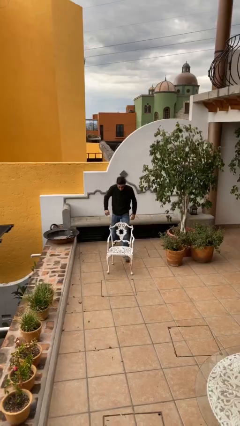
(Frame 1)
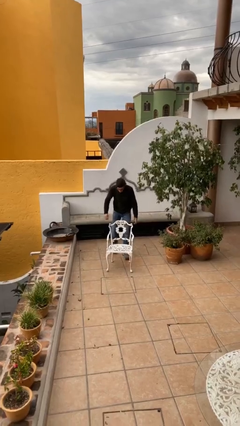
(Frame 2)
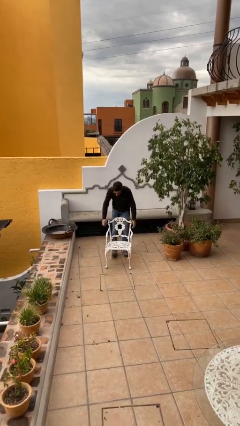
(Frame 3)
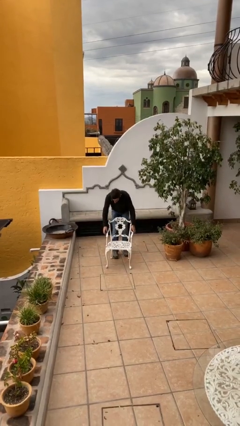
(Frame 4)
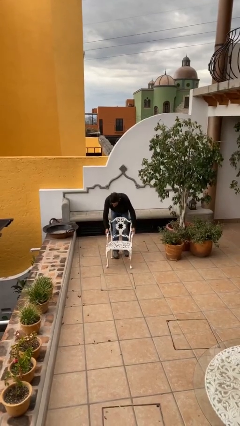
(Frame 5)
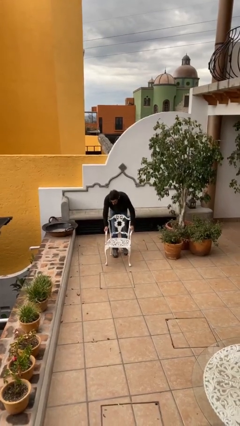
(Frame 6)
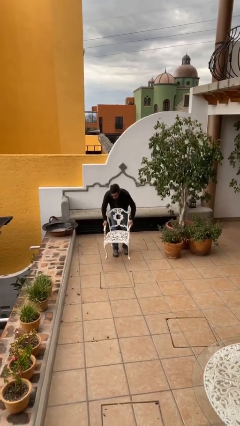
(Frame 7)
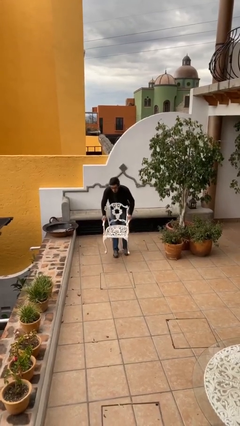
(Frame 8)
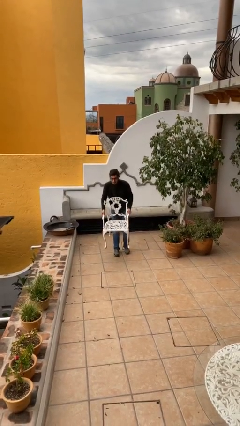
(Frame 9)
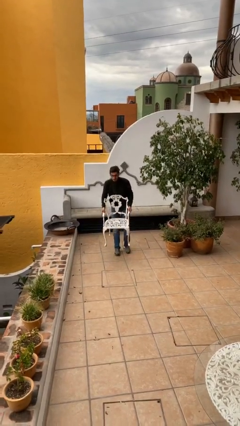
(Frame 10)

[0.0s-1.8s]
person picks up object from floor

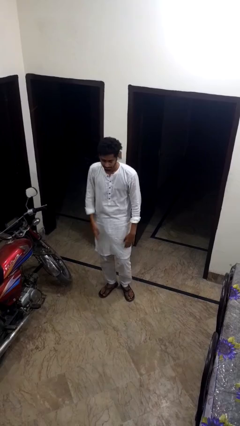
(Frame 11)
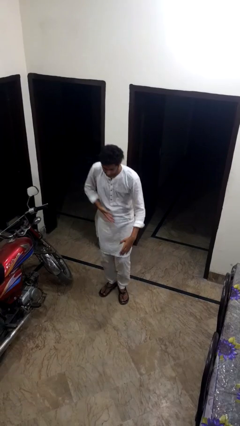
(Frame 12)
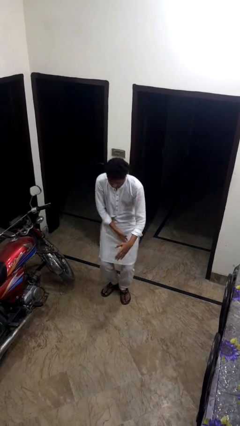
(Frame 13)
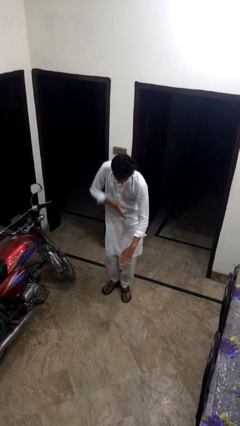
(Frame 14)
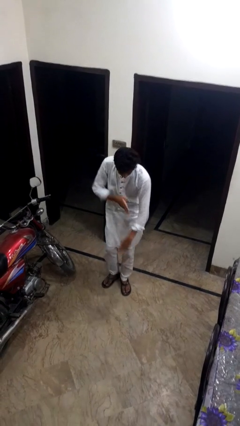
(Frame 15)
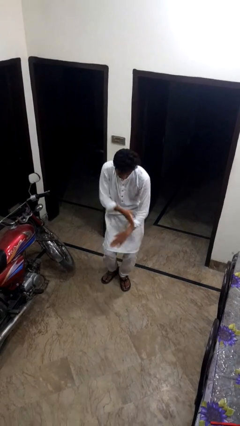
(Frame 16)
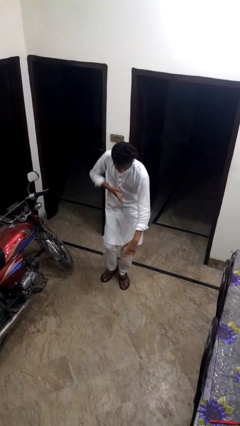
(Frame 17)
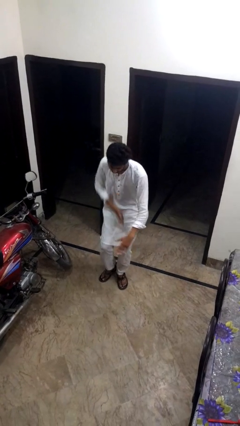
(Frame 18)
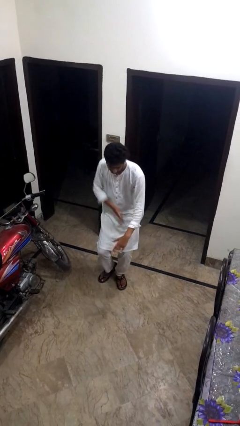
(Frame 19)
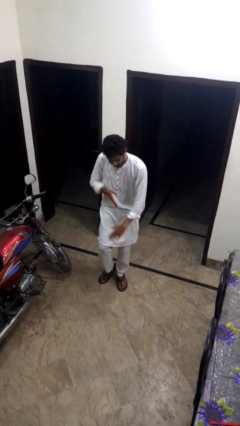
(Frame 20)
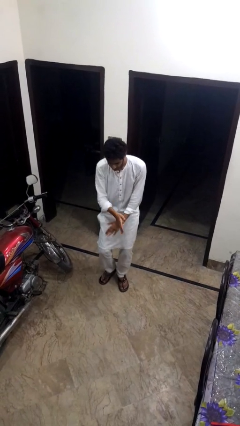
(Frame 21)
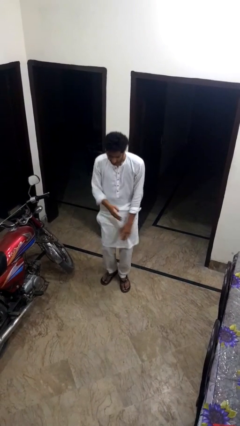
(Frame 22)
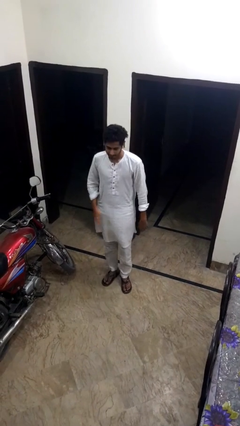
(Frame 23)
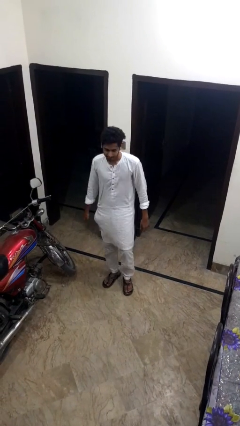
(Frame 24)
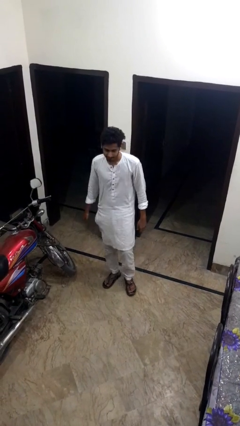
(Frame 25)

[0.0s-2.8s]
person dances in place

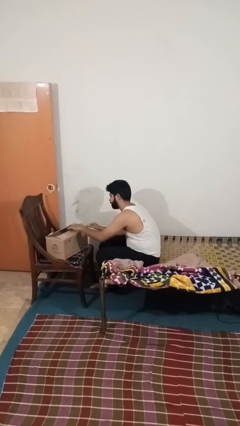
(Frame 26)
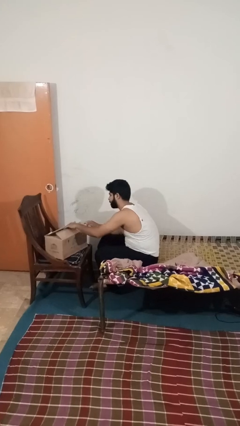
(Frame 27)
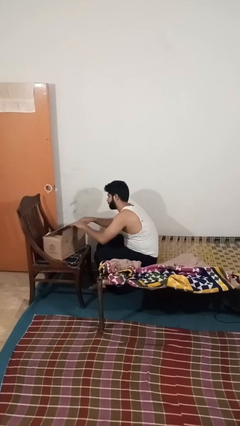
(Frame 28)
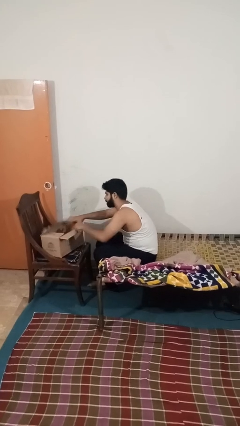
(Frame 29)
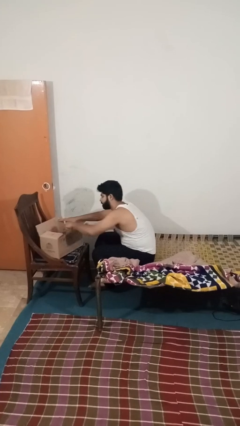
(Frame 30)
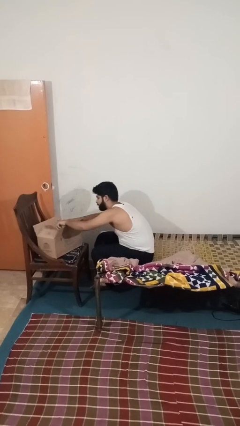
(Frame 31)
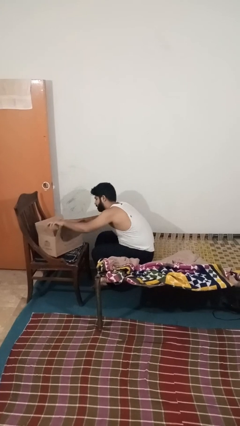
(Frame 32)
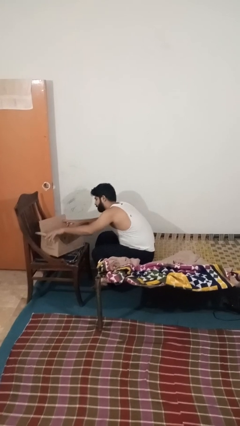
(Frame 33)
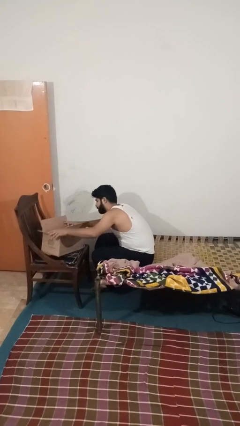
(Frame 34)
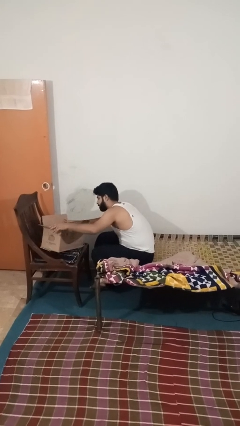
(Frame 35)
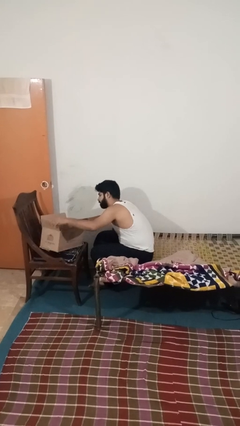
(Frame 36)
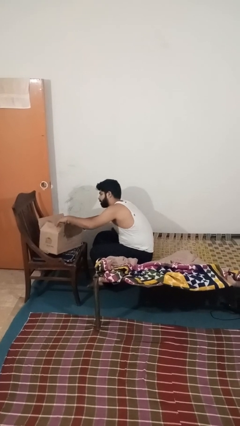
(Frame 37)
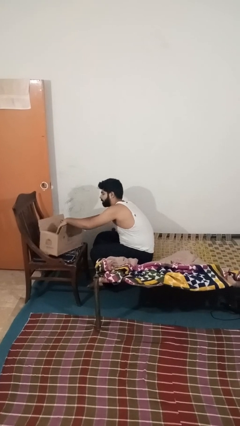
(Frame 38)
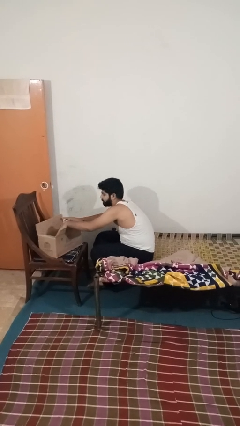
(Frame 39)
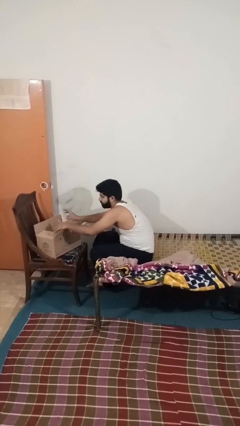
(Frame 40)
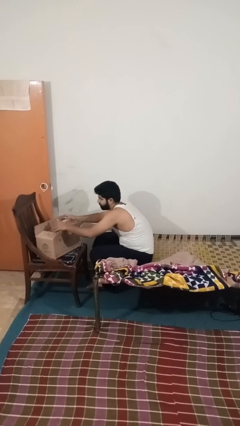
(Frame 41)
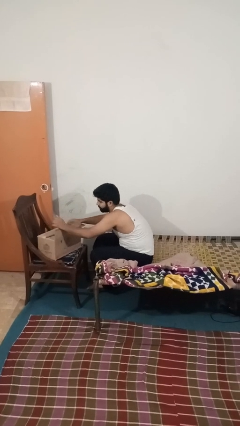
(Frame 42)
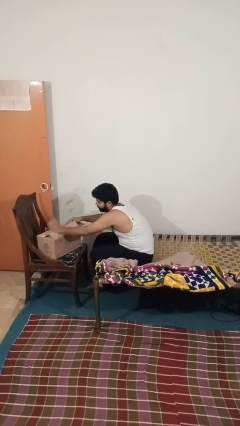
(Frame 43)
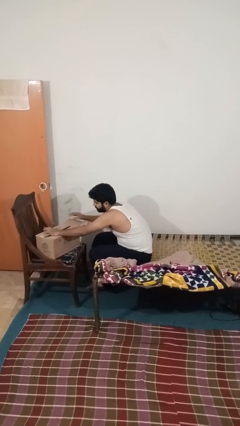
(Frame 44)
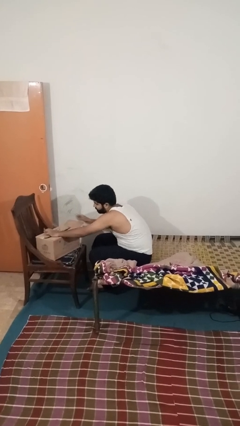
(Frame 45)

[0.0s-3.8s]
person opens box

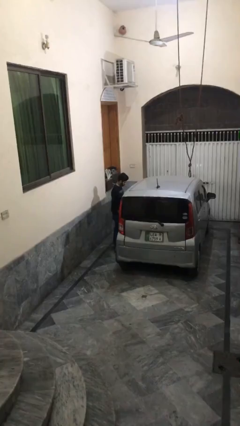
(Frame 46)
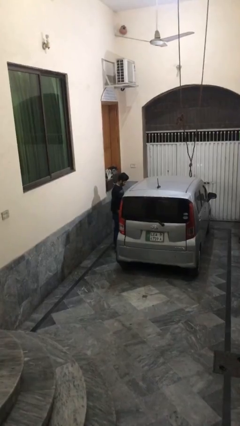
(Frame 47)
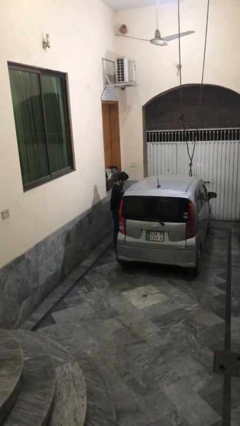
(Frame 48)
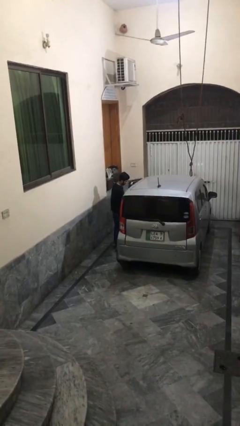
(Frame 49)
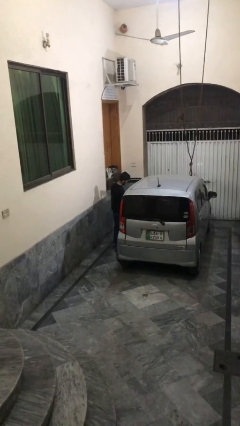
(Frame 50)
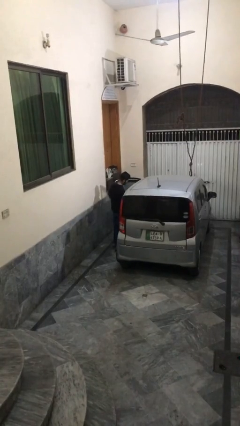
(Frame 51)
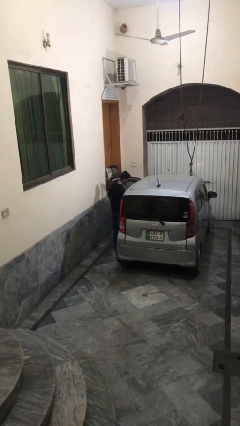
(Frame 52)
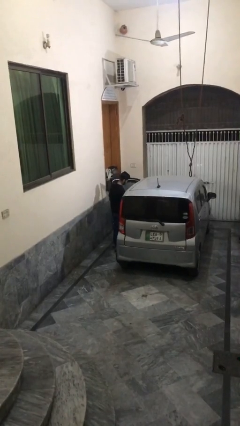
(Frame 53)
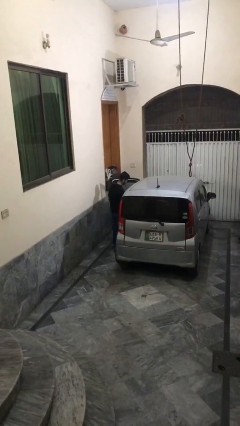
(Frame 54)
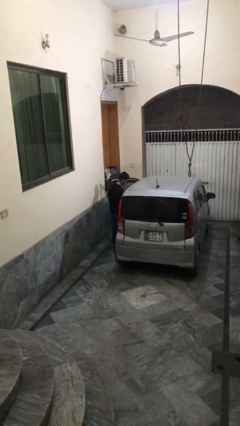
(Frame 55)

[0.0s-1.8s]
person opens car door

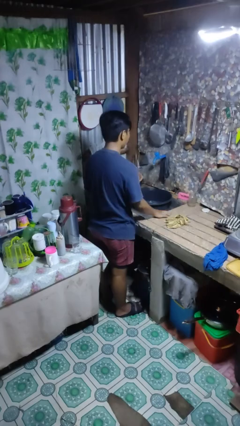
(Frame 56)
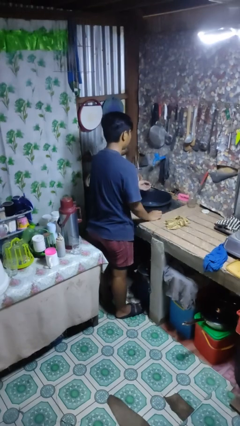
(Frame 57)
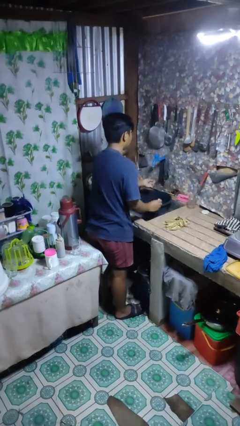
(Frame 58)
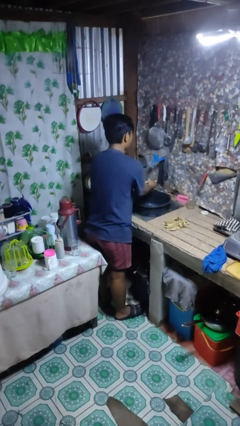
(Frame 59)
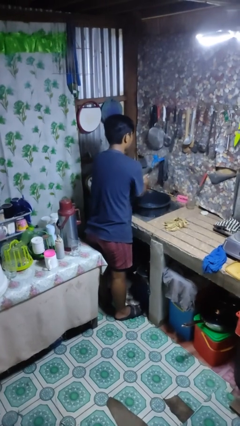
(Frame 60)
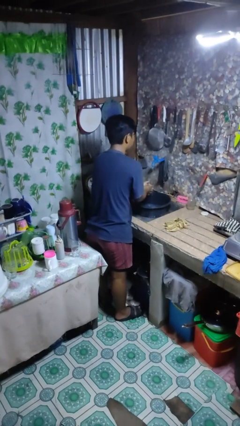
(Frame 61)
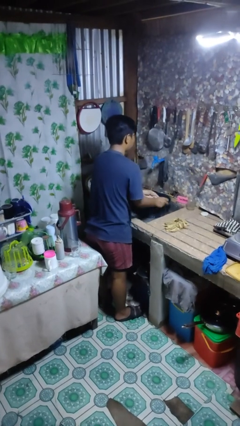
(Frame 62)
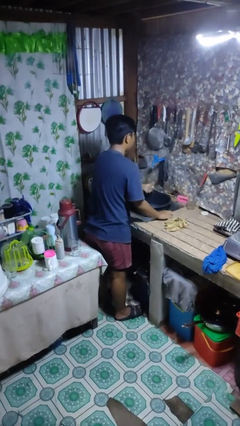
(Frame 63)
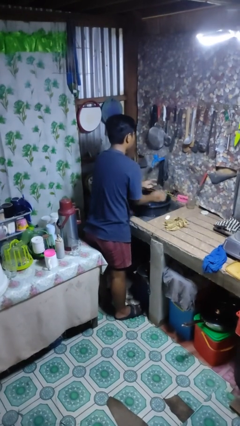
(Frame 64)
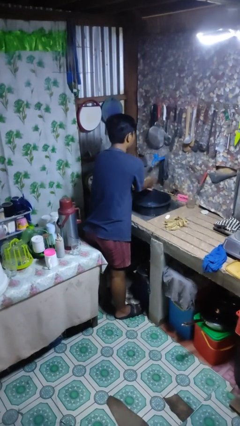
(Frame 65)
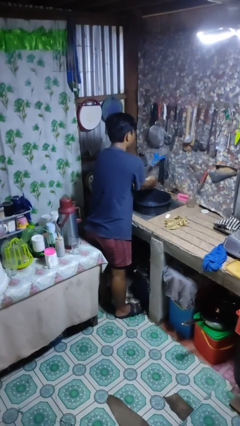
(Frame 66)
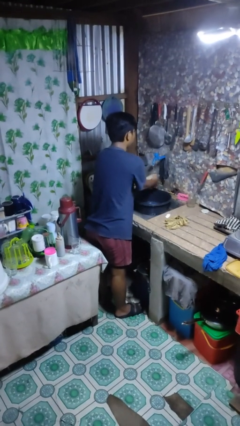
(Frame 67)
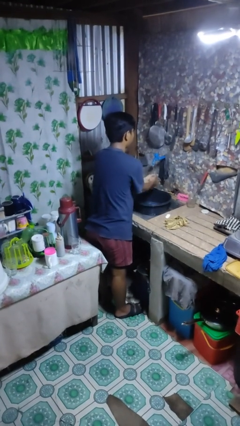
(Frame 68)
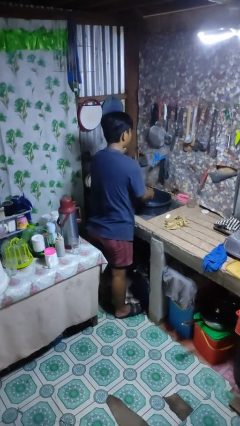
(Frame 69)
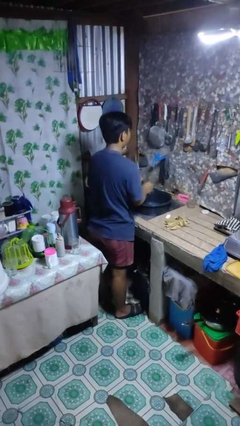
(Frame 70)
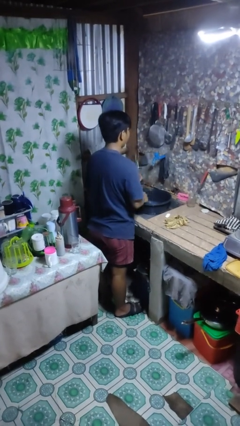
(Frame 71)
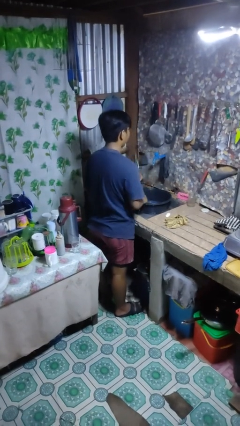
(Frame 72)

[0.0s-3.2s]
person washes hands

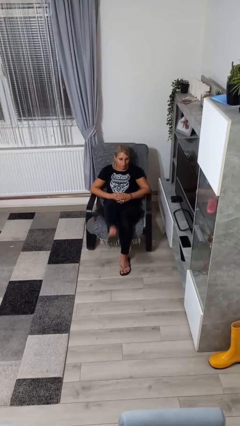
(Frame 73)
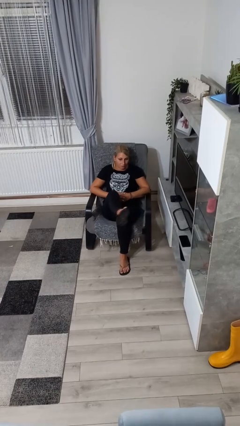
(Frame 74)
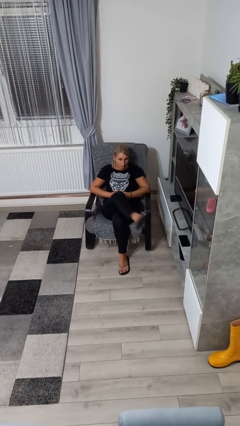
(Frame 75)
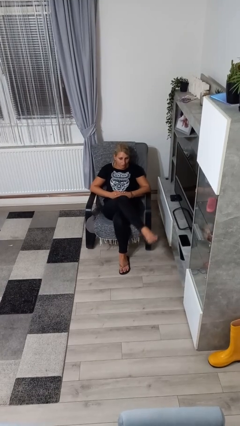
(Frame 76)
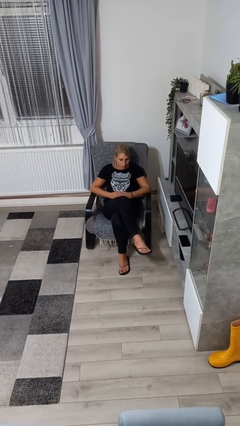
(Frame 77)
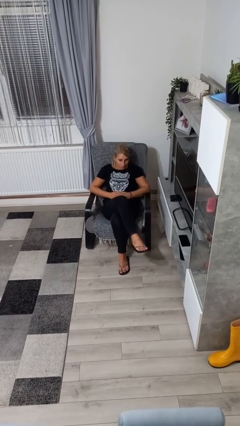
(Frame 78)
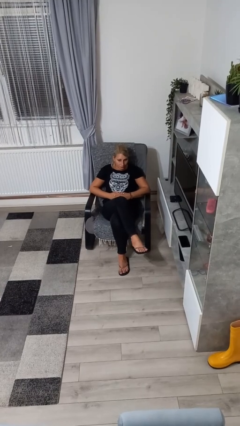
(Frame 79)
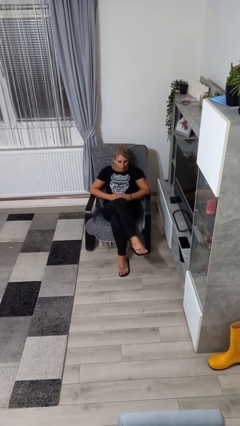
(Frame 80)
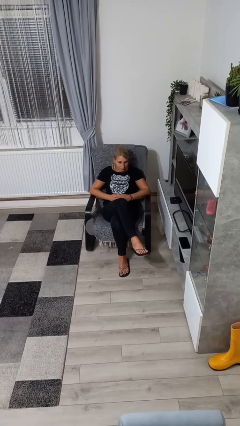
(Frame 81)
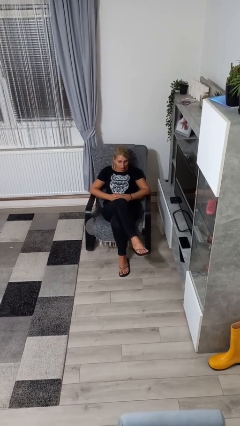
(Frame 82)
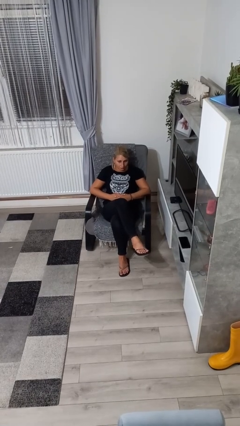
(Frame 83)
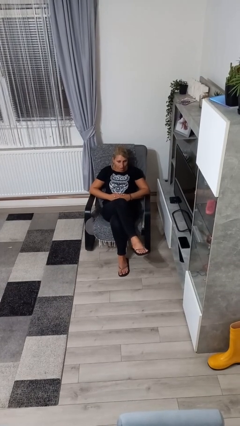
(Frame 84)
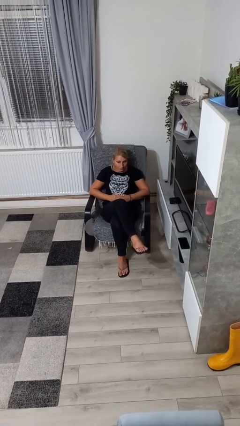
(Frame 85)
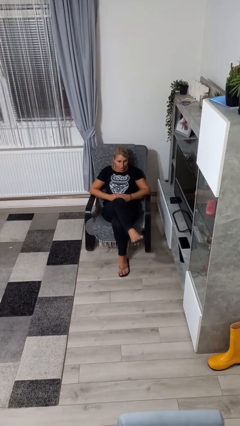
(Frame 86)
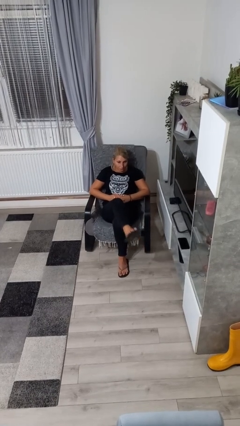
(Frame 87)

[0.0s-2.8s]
person crosses legs

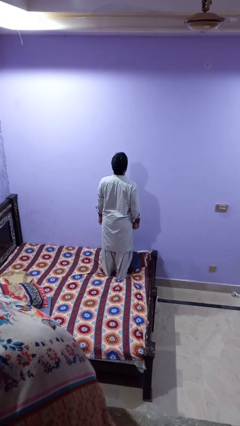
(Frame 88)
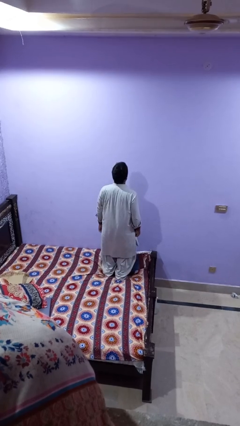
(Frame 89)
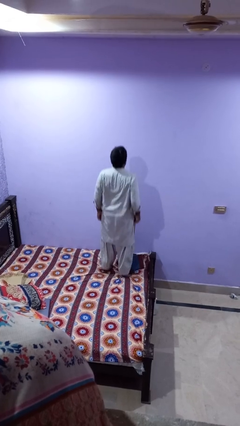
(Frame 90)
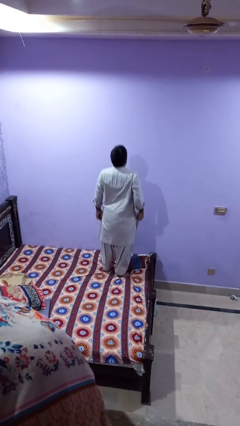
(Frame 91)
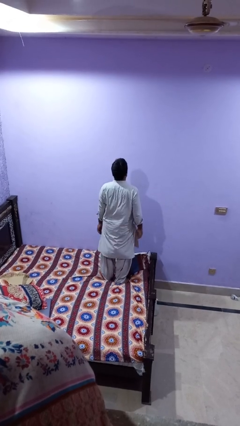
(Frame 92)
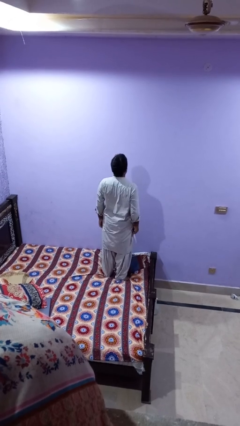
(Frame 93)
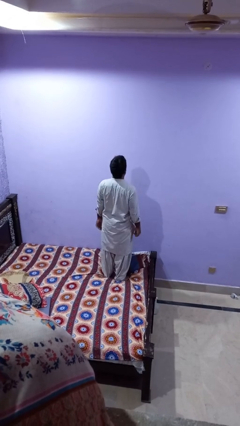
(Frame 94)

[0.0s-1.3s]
person jumps on bed
